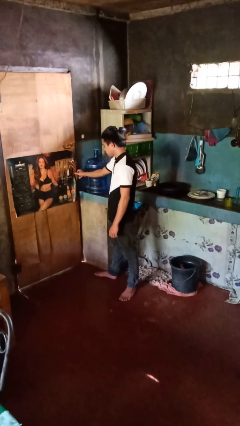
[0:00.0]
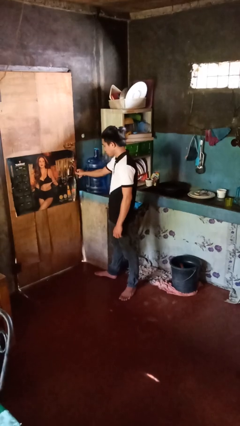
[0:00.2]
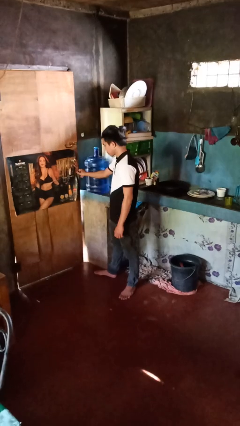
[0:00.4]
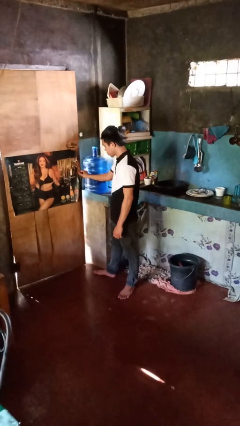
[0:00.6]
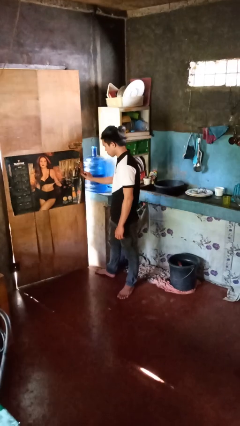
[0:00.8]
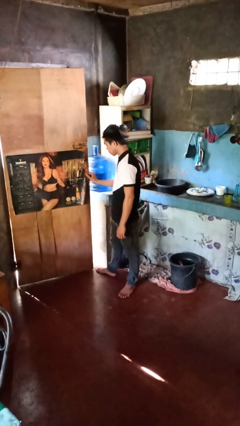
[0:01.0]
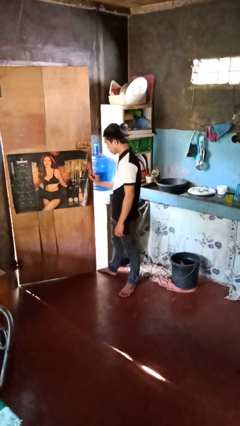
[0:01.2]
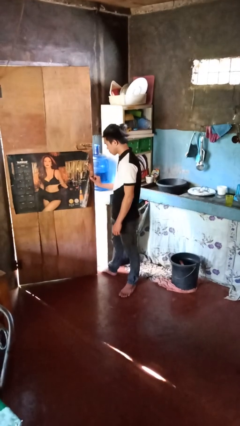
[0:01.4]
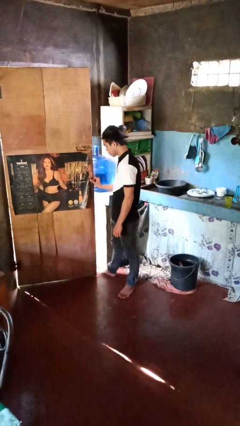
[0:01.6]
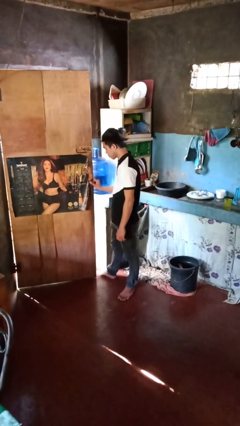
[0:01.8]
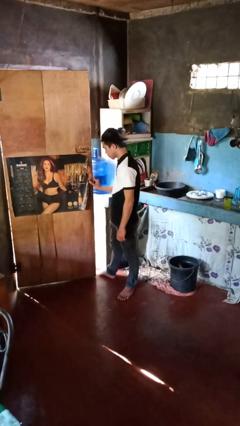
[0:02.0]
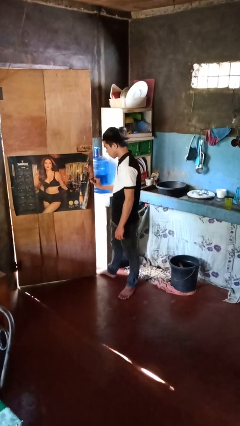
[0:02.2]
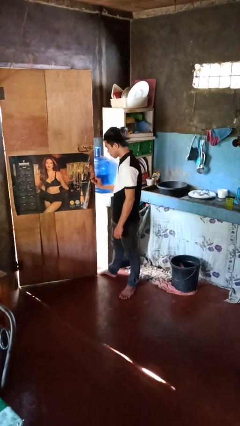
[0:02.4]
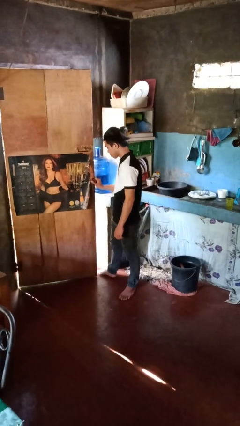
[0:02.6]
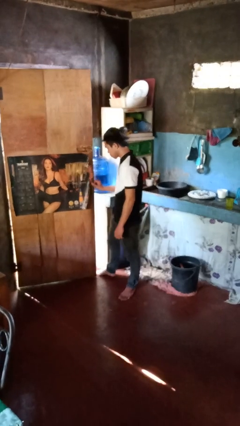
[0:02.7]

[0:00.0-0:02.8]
person opens facility door

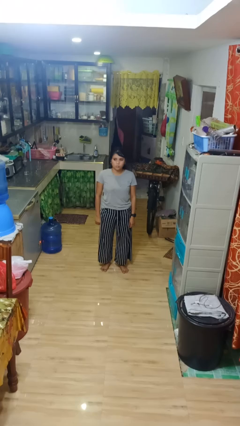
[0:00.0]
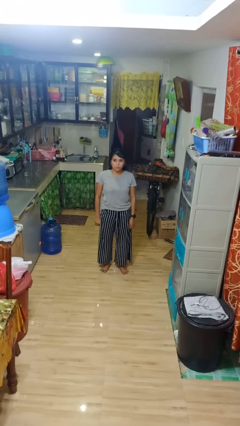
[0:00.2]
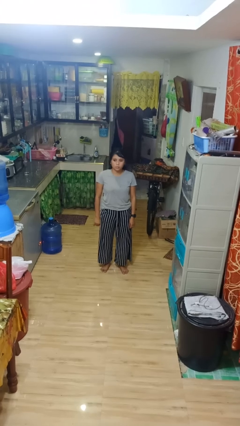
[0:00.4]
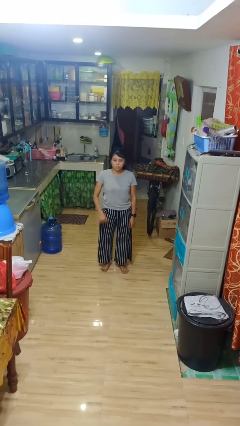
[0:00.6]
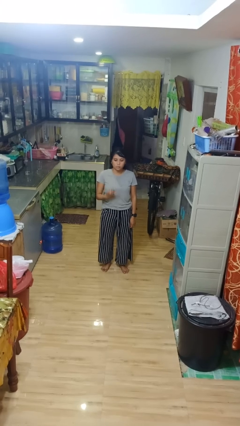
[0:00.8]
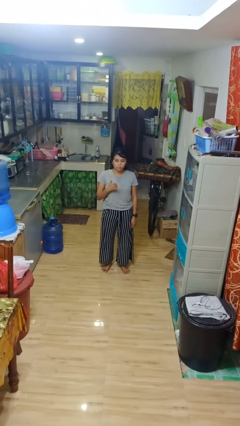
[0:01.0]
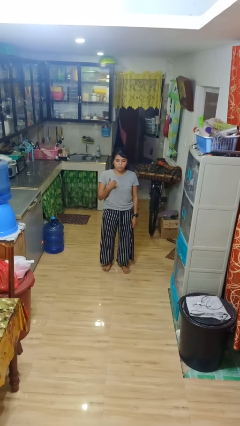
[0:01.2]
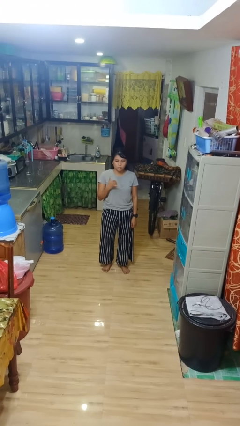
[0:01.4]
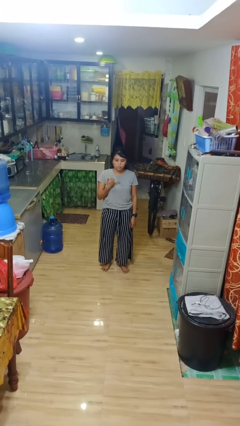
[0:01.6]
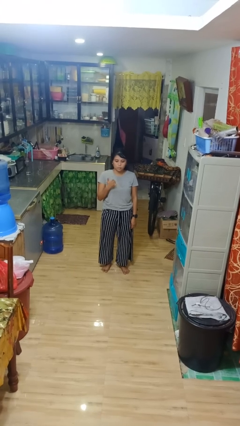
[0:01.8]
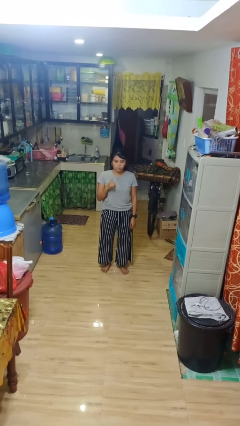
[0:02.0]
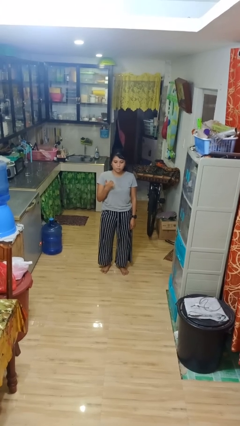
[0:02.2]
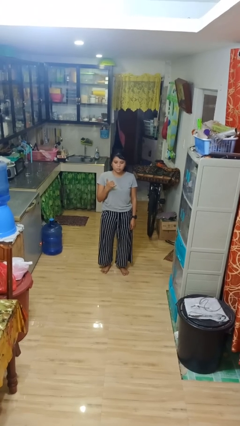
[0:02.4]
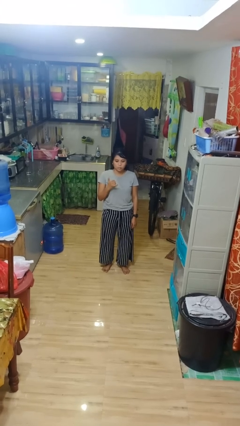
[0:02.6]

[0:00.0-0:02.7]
person gestures hang loose

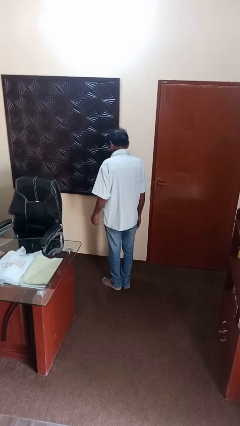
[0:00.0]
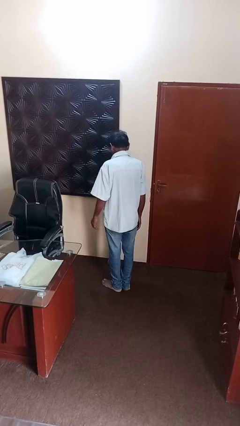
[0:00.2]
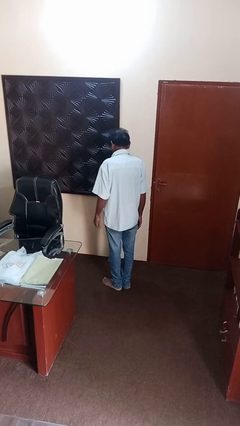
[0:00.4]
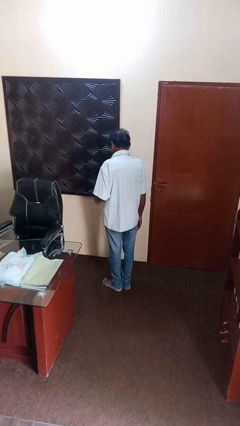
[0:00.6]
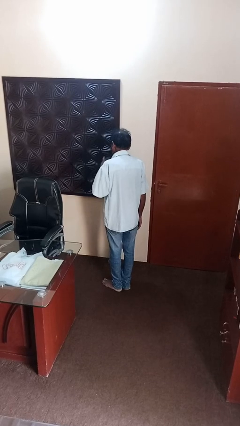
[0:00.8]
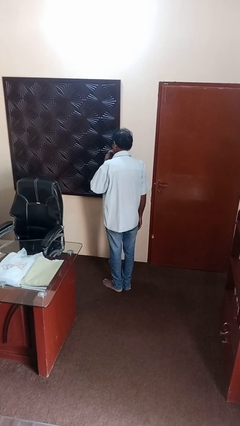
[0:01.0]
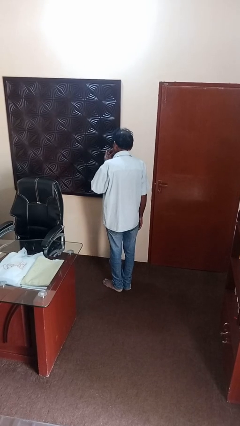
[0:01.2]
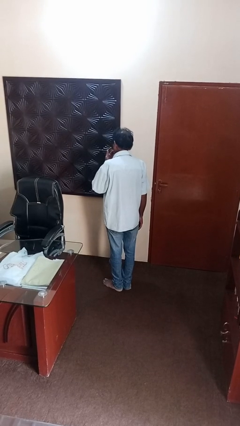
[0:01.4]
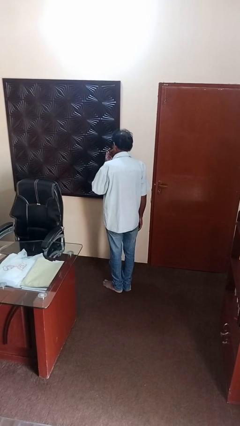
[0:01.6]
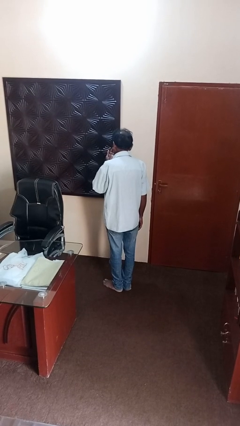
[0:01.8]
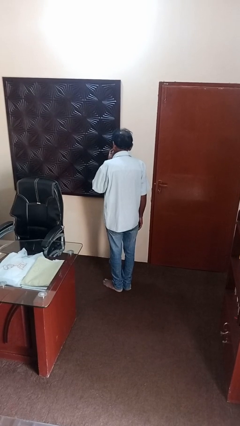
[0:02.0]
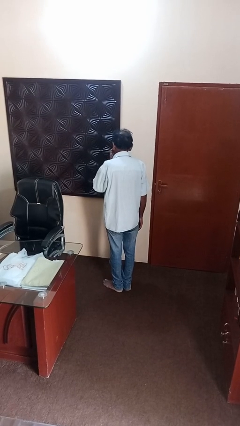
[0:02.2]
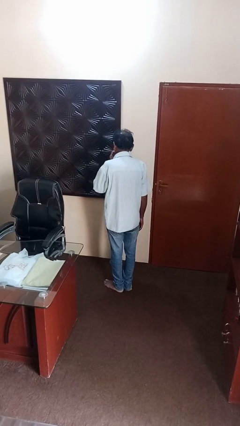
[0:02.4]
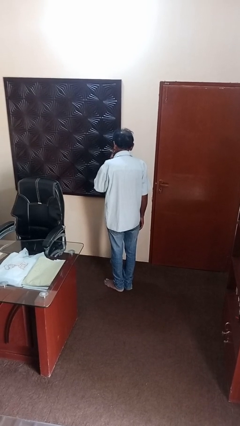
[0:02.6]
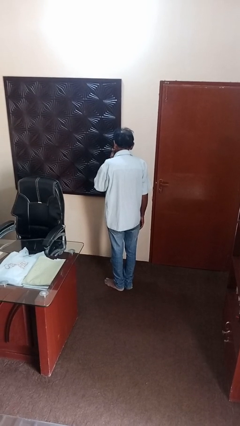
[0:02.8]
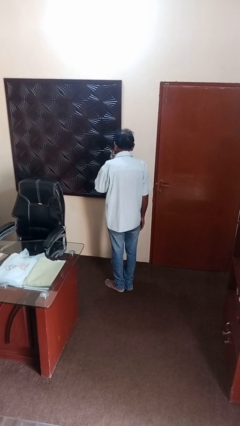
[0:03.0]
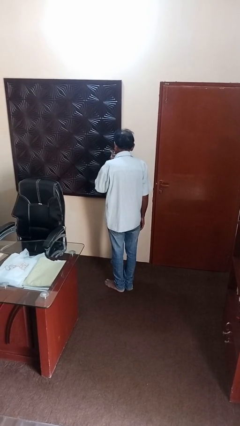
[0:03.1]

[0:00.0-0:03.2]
person licks fingers

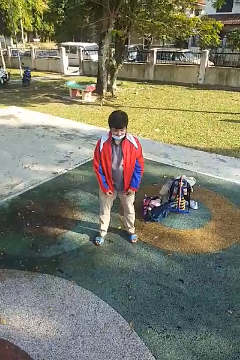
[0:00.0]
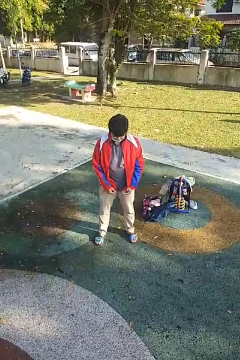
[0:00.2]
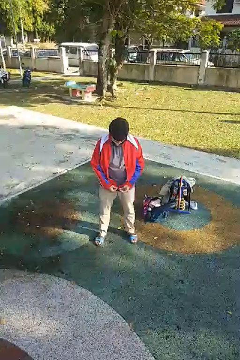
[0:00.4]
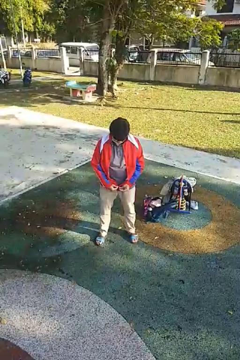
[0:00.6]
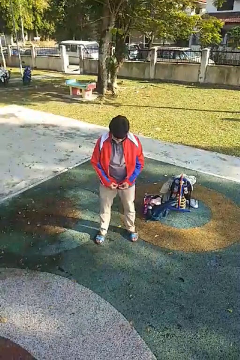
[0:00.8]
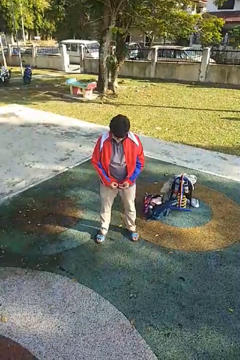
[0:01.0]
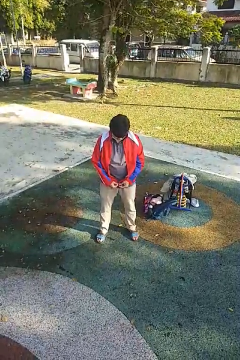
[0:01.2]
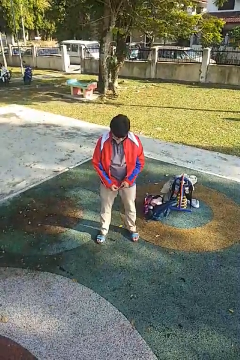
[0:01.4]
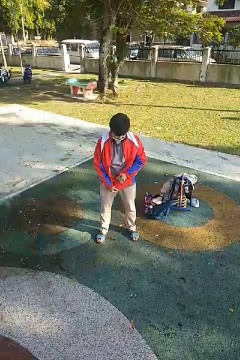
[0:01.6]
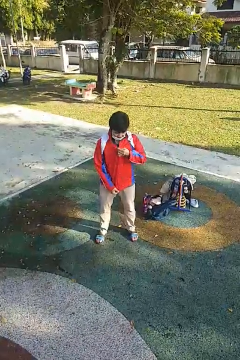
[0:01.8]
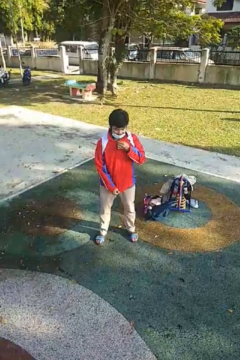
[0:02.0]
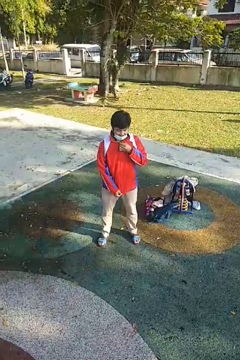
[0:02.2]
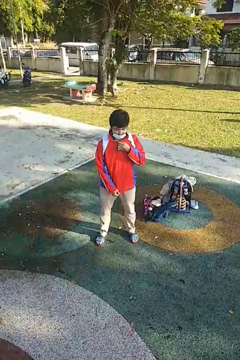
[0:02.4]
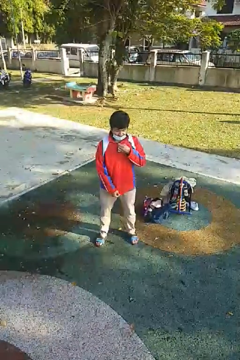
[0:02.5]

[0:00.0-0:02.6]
person zips up jacket

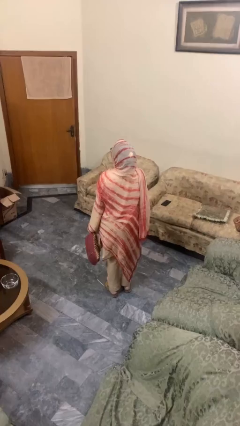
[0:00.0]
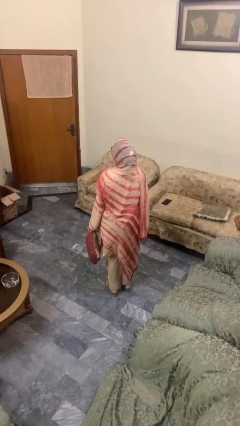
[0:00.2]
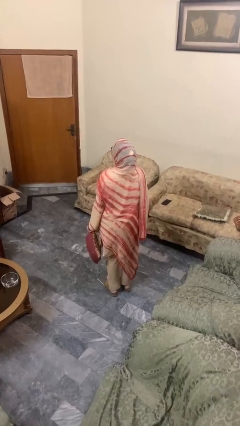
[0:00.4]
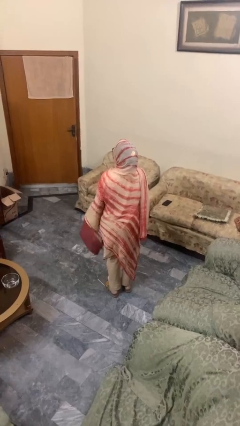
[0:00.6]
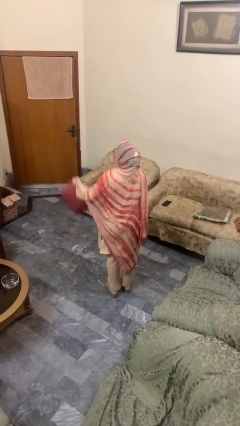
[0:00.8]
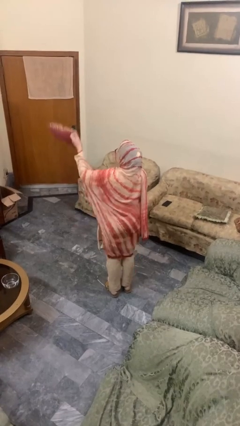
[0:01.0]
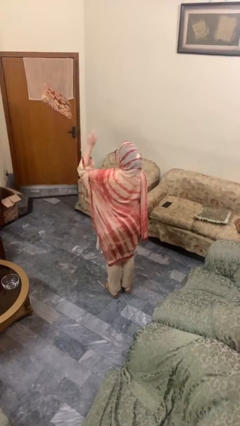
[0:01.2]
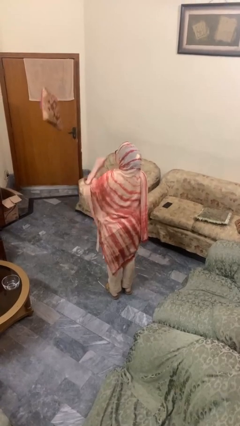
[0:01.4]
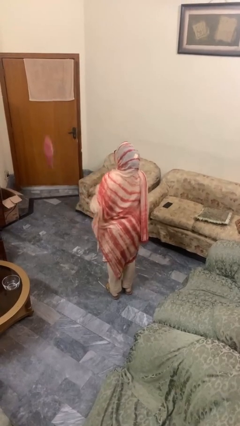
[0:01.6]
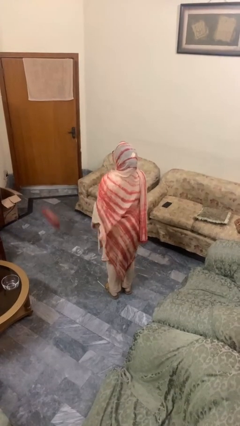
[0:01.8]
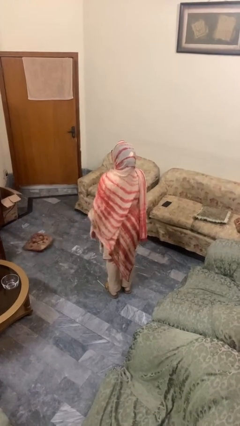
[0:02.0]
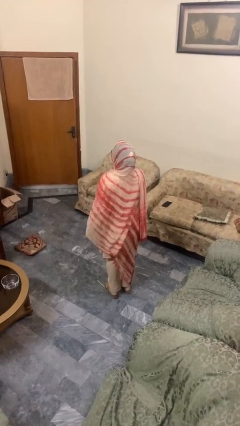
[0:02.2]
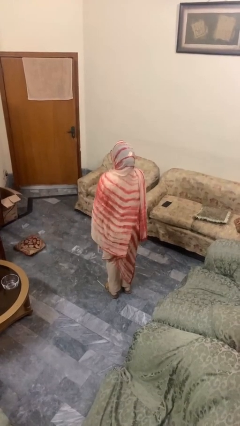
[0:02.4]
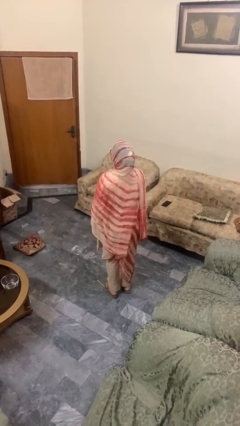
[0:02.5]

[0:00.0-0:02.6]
person throws object into air

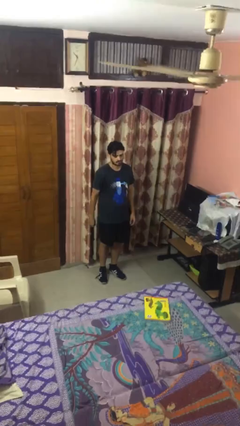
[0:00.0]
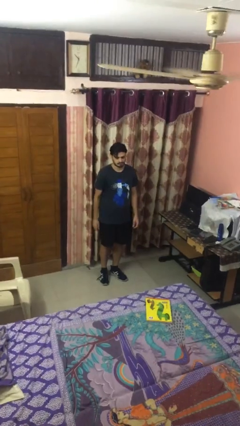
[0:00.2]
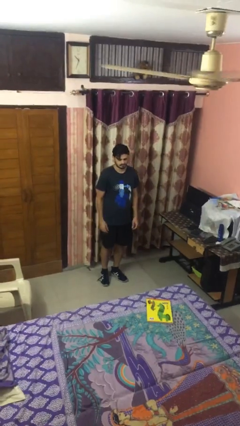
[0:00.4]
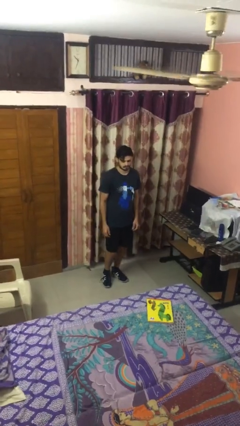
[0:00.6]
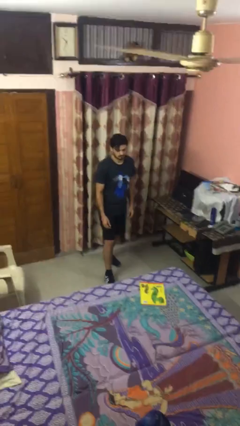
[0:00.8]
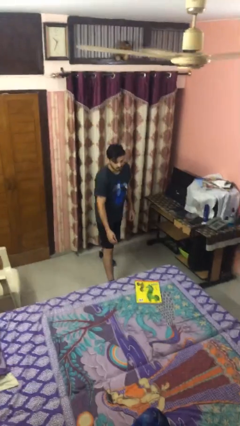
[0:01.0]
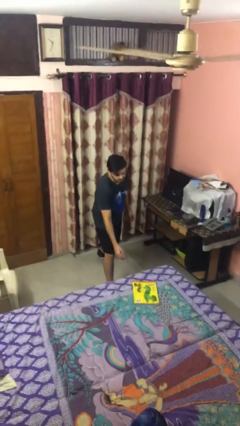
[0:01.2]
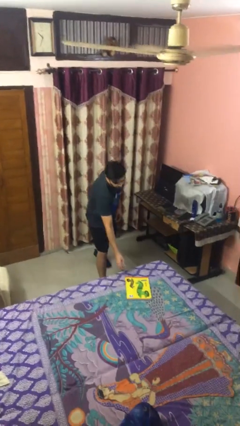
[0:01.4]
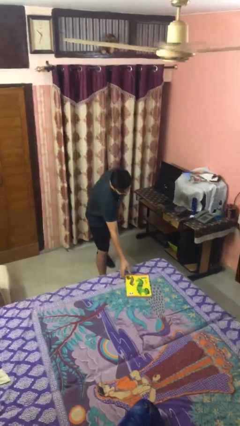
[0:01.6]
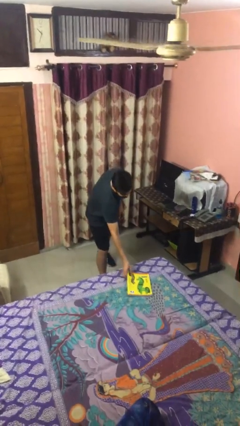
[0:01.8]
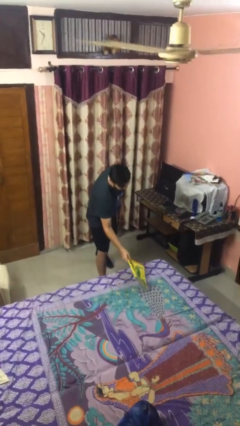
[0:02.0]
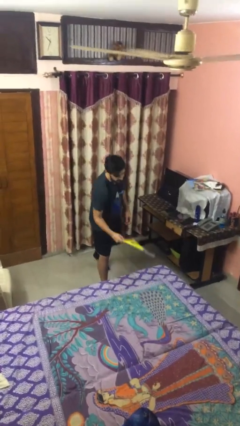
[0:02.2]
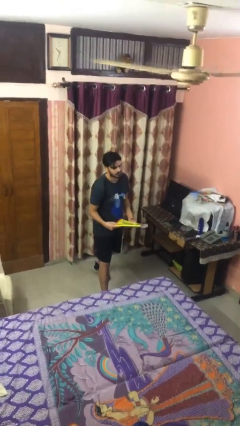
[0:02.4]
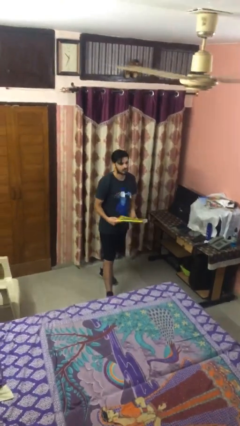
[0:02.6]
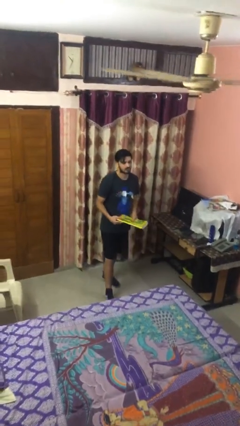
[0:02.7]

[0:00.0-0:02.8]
person picks up object from bed

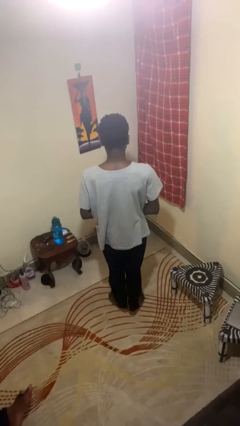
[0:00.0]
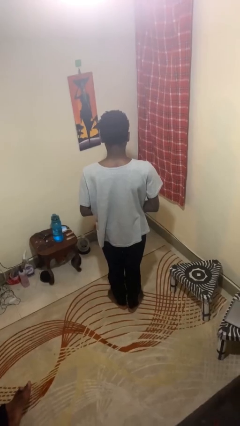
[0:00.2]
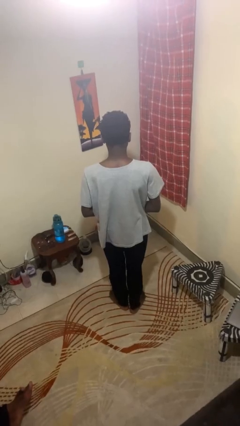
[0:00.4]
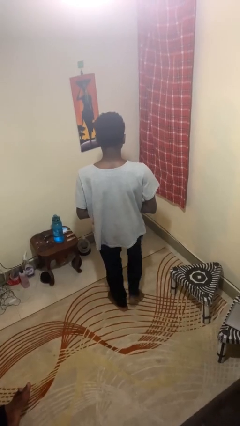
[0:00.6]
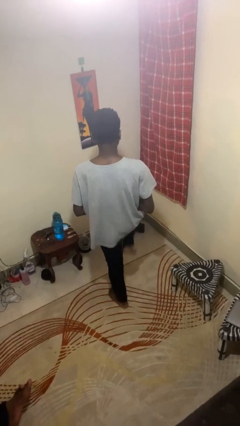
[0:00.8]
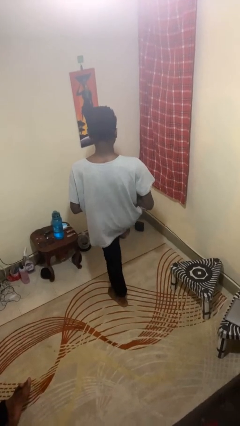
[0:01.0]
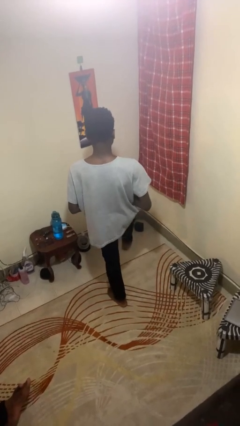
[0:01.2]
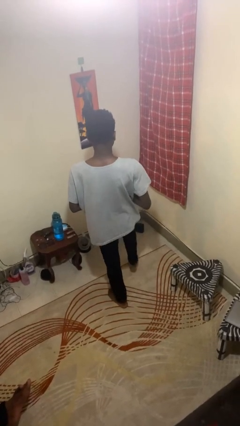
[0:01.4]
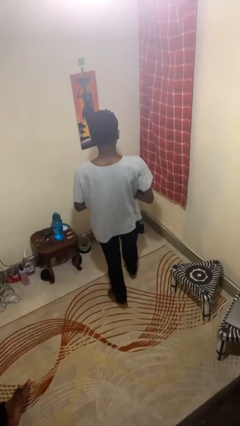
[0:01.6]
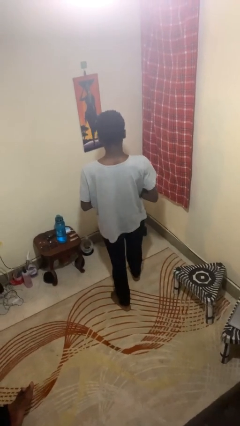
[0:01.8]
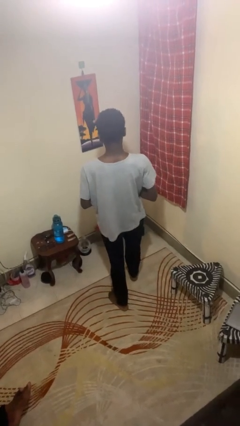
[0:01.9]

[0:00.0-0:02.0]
person karate kicks
